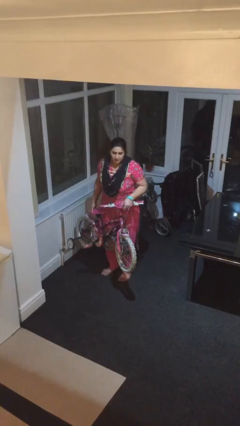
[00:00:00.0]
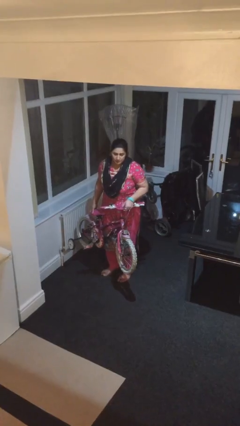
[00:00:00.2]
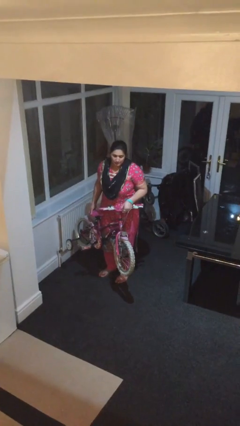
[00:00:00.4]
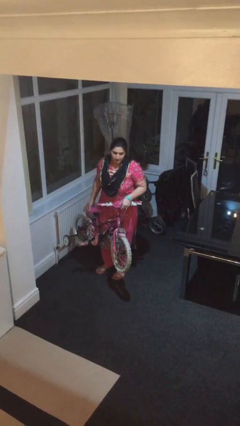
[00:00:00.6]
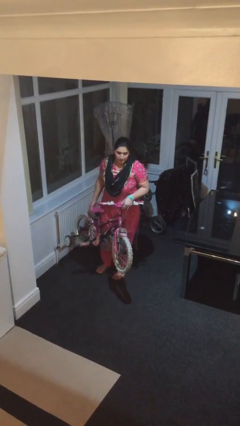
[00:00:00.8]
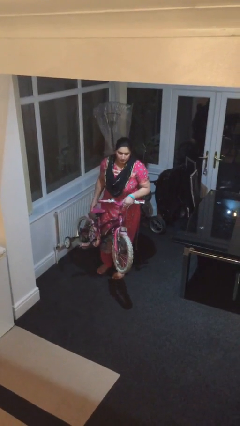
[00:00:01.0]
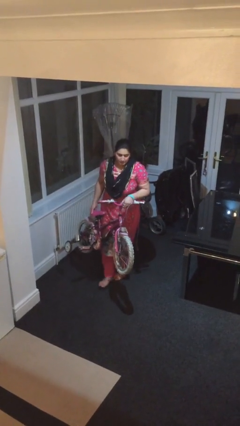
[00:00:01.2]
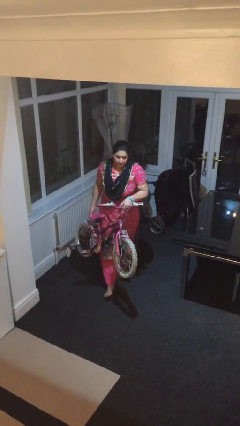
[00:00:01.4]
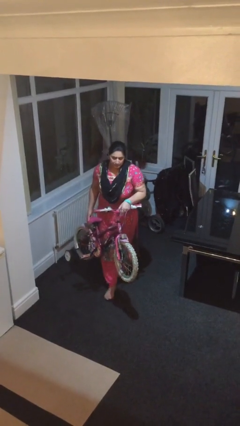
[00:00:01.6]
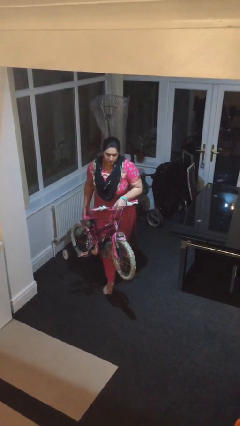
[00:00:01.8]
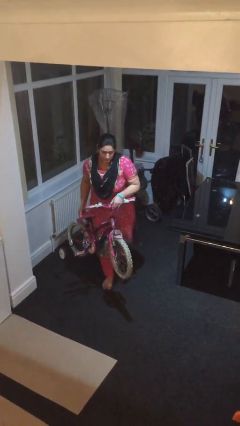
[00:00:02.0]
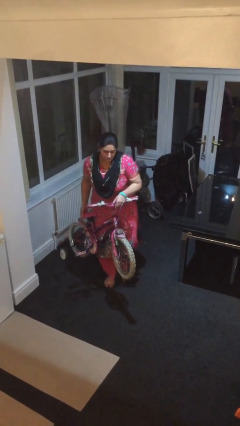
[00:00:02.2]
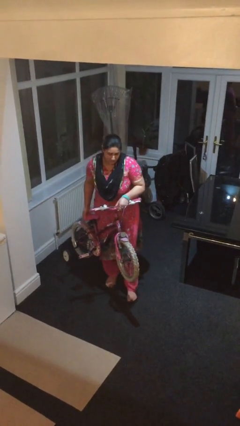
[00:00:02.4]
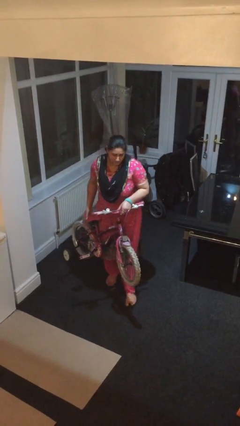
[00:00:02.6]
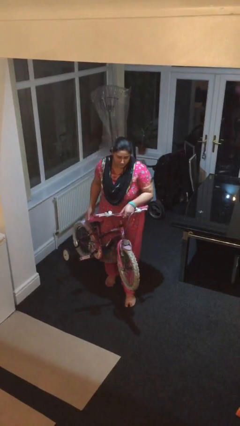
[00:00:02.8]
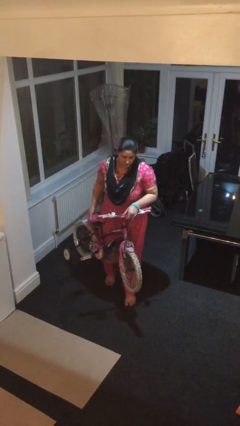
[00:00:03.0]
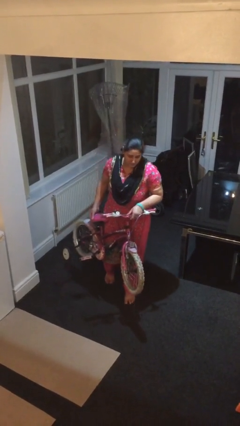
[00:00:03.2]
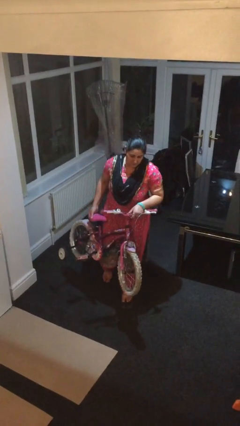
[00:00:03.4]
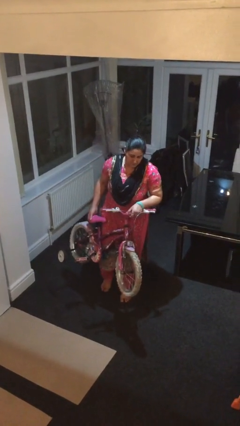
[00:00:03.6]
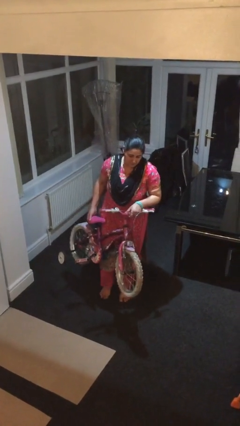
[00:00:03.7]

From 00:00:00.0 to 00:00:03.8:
person carries heavy object

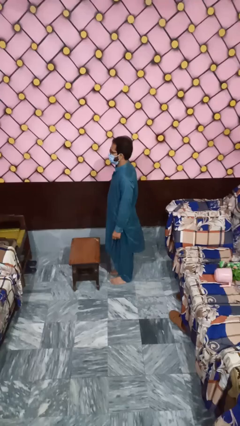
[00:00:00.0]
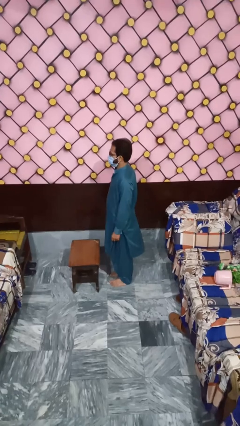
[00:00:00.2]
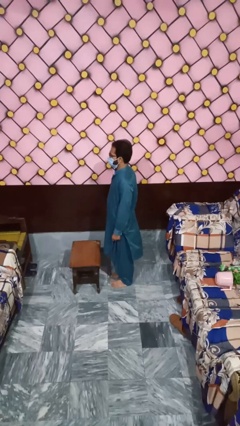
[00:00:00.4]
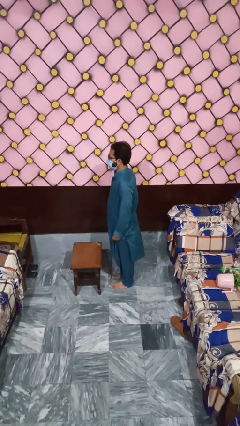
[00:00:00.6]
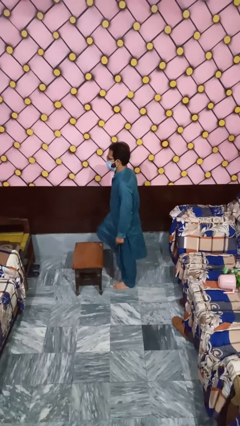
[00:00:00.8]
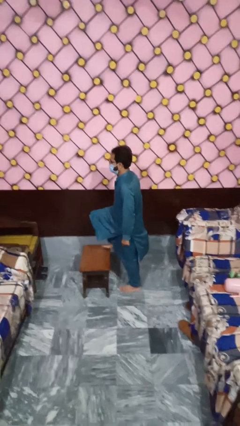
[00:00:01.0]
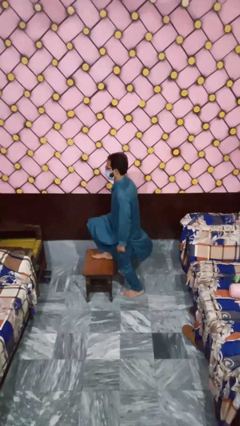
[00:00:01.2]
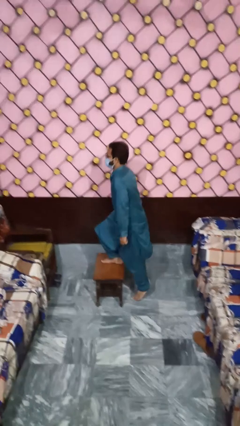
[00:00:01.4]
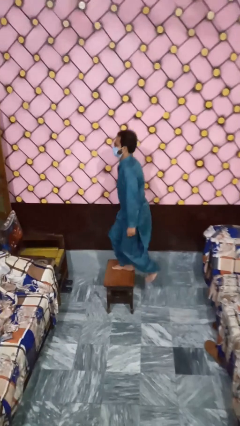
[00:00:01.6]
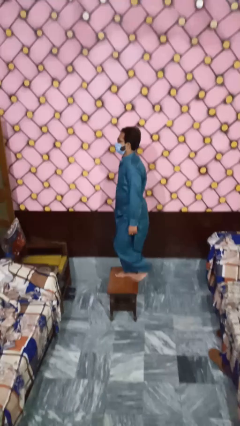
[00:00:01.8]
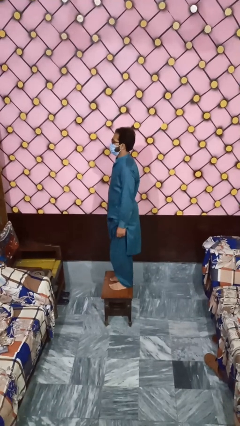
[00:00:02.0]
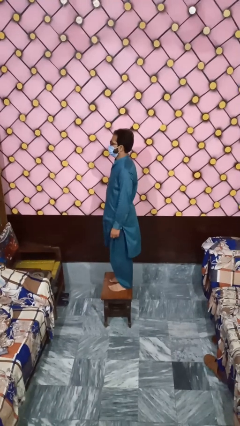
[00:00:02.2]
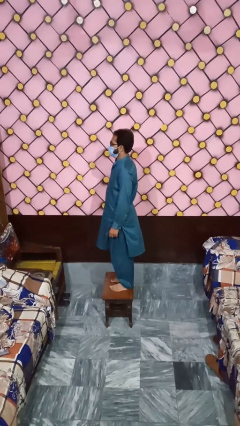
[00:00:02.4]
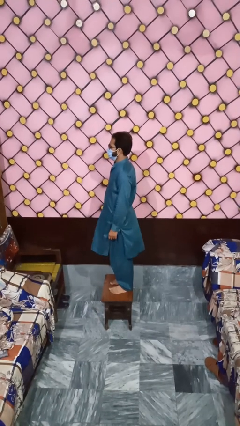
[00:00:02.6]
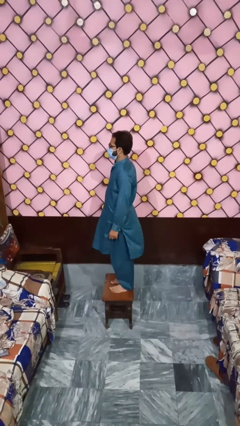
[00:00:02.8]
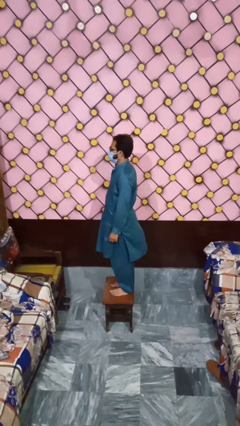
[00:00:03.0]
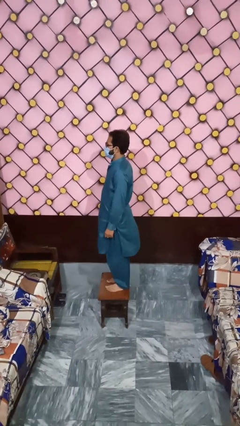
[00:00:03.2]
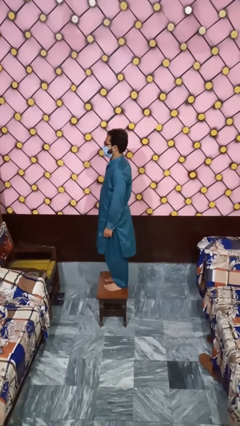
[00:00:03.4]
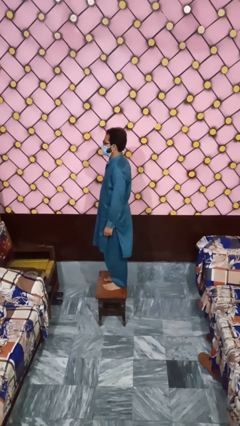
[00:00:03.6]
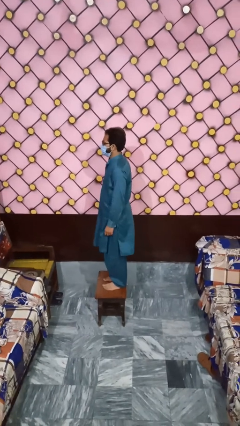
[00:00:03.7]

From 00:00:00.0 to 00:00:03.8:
person climbs on table

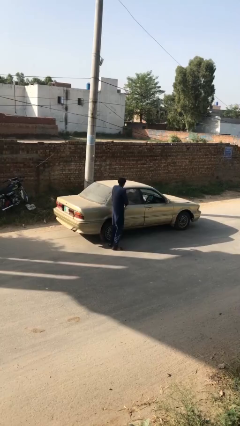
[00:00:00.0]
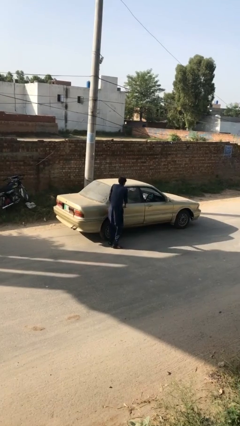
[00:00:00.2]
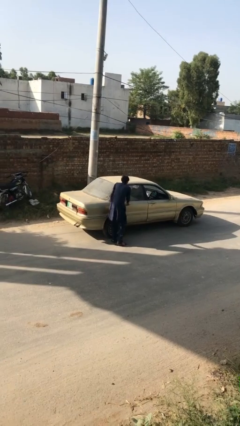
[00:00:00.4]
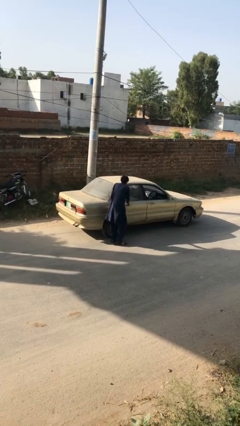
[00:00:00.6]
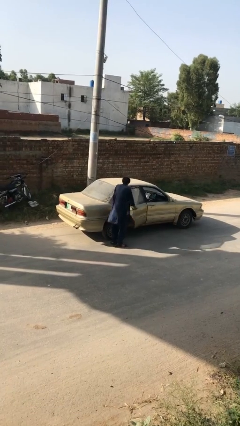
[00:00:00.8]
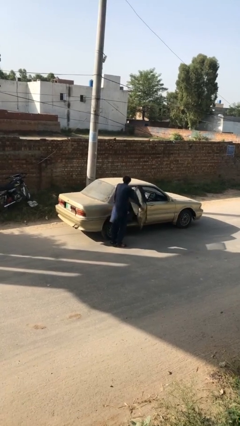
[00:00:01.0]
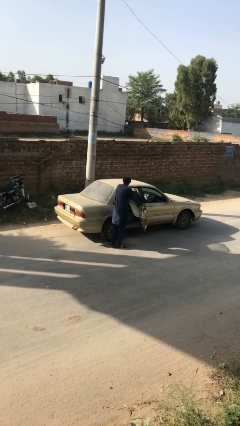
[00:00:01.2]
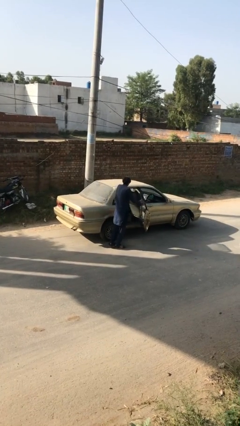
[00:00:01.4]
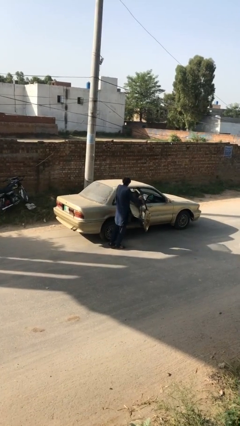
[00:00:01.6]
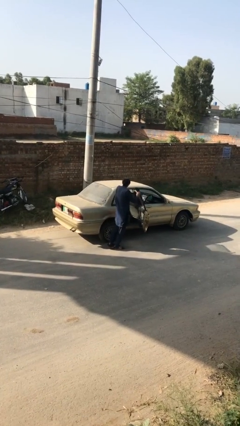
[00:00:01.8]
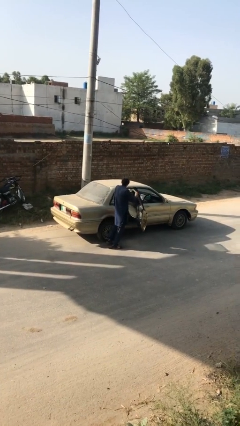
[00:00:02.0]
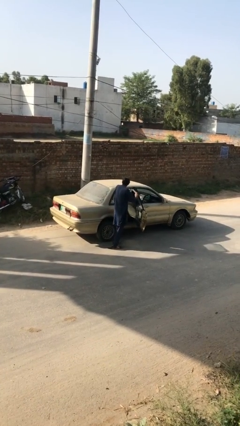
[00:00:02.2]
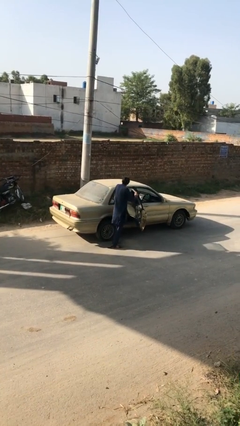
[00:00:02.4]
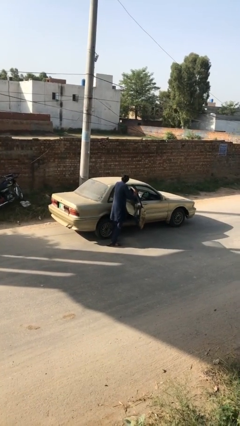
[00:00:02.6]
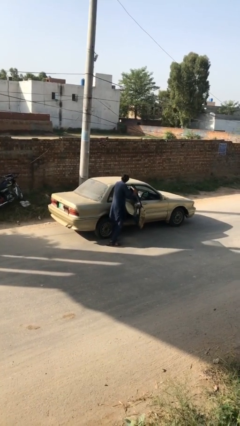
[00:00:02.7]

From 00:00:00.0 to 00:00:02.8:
person opens car door

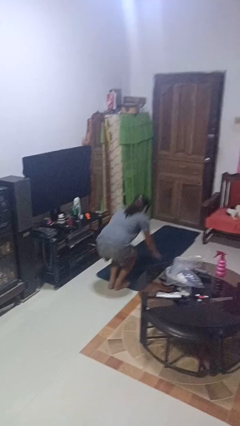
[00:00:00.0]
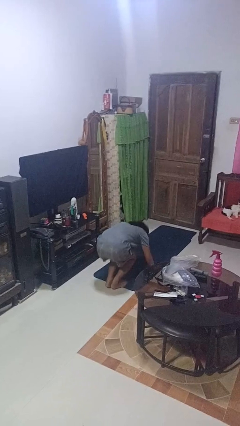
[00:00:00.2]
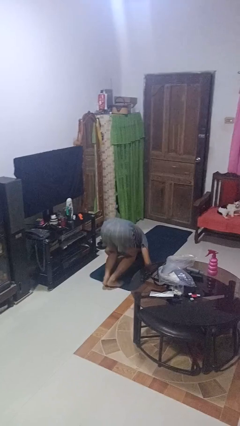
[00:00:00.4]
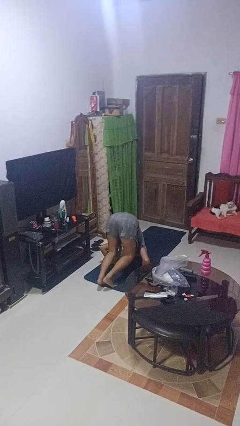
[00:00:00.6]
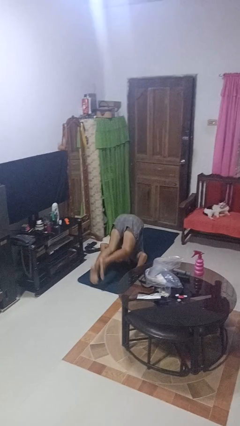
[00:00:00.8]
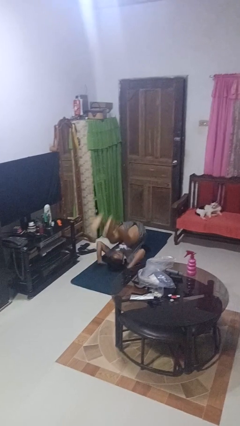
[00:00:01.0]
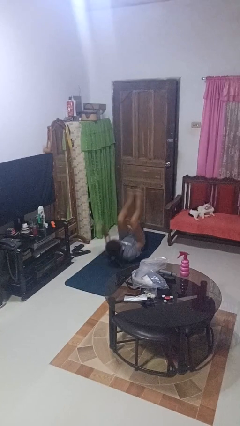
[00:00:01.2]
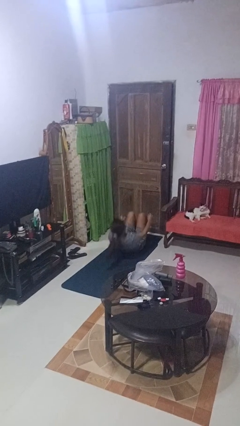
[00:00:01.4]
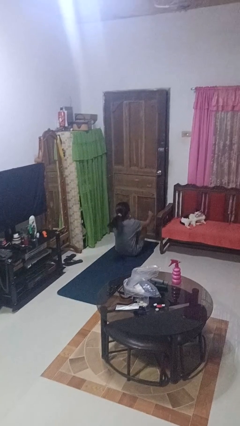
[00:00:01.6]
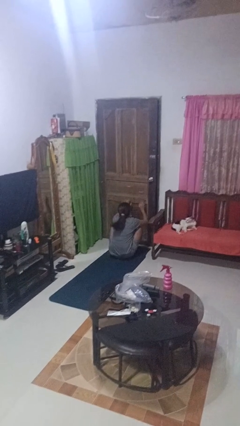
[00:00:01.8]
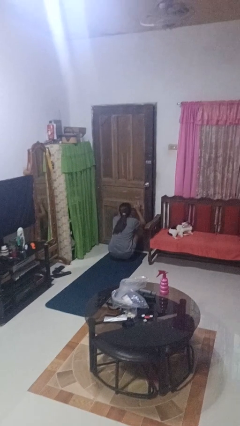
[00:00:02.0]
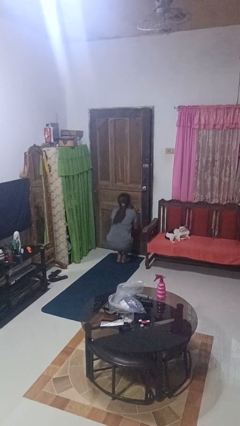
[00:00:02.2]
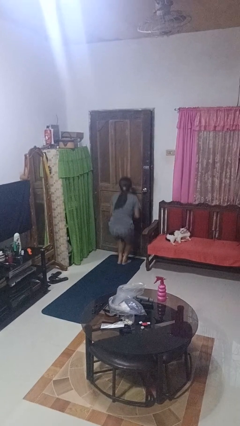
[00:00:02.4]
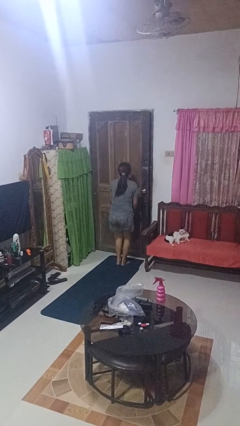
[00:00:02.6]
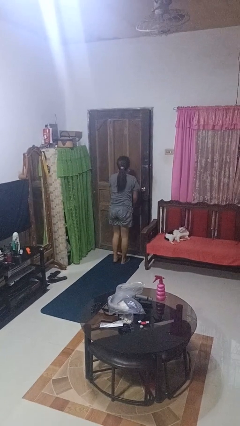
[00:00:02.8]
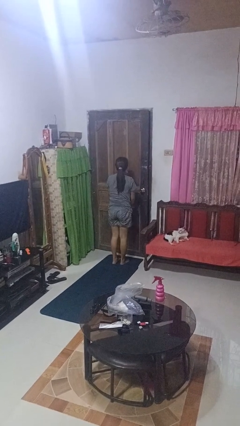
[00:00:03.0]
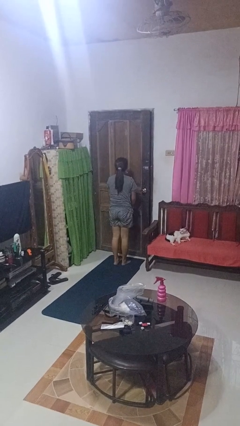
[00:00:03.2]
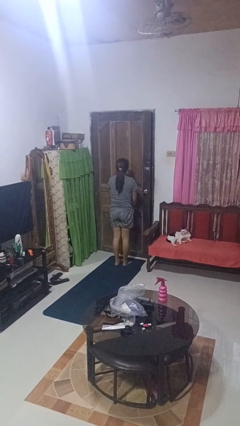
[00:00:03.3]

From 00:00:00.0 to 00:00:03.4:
person somersaults

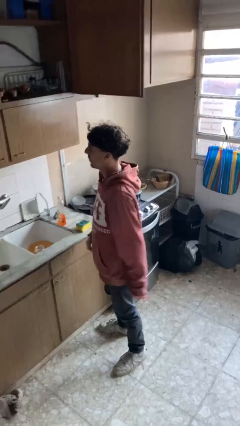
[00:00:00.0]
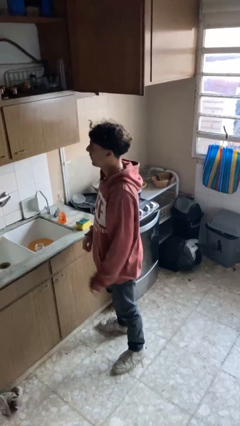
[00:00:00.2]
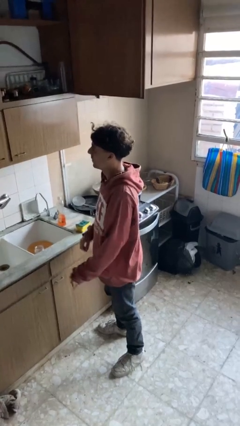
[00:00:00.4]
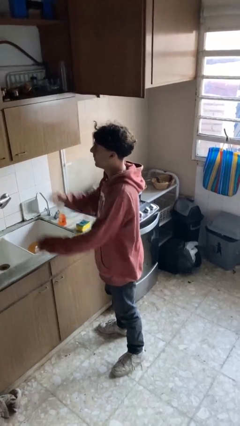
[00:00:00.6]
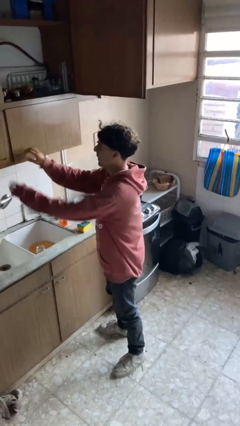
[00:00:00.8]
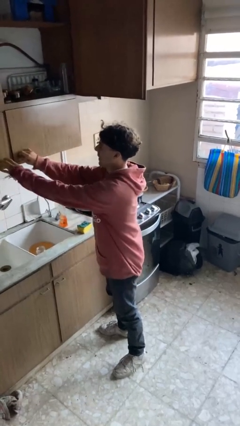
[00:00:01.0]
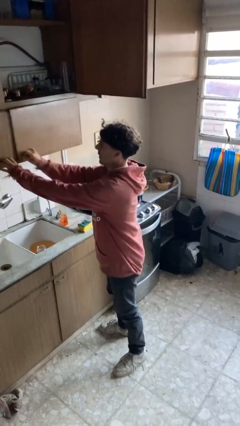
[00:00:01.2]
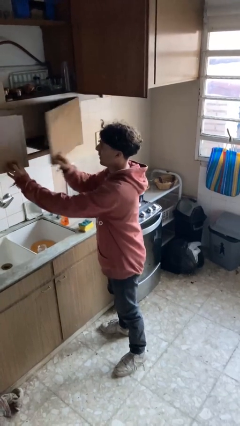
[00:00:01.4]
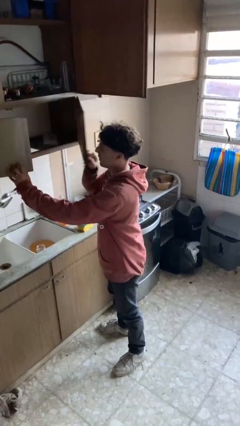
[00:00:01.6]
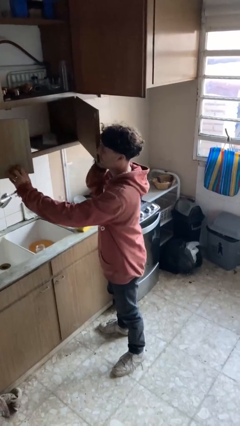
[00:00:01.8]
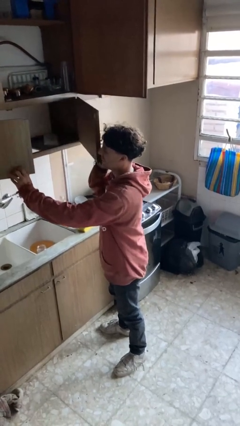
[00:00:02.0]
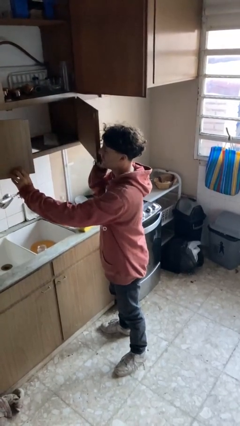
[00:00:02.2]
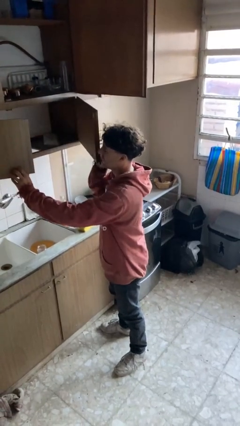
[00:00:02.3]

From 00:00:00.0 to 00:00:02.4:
person opens cabinet

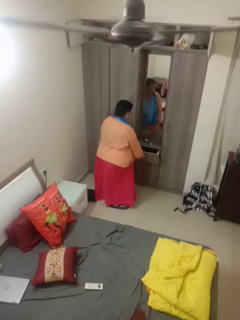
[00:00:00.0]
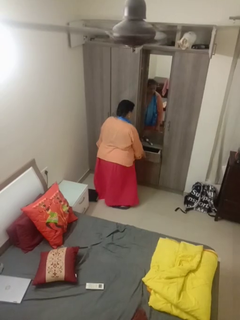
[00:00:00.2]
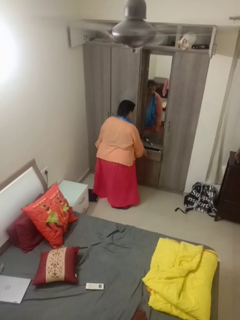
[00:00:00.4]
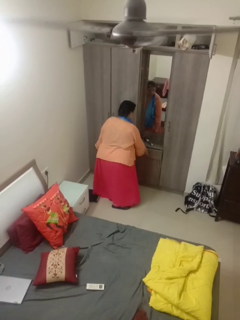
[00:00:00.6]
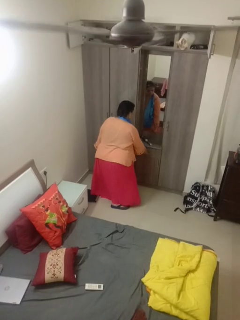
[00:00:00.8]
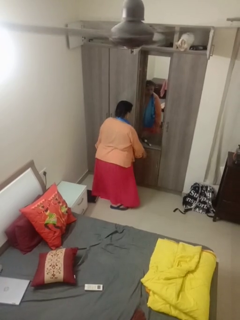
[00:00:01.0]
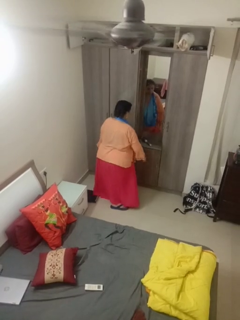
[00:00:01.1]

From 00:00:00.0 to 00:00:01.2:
person closes dresser drawer
